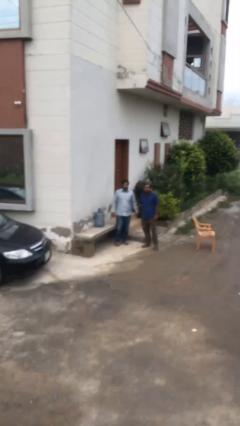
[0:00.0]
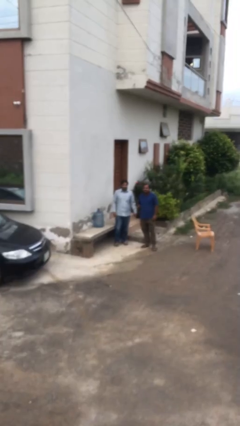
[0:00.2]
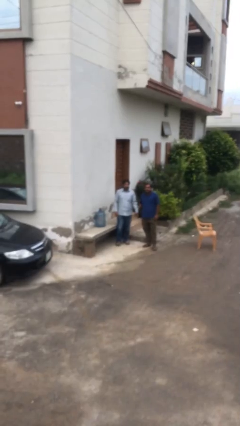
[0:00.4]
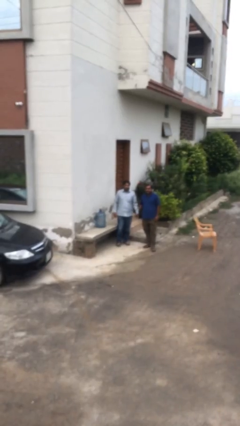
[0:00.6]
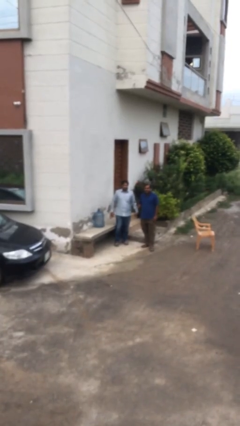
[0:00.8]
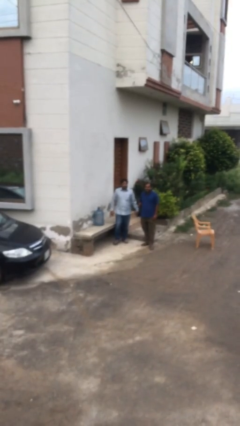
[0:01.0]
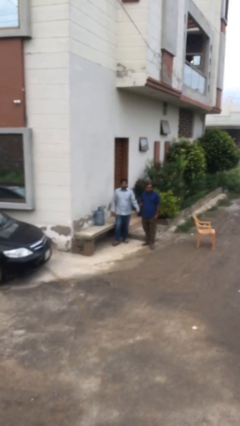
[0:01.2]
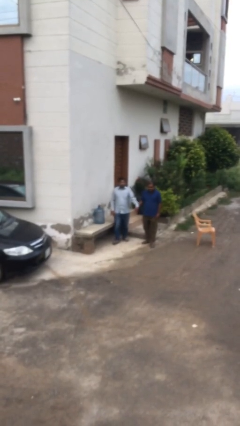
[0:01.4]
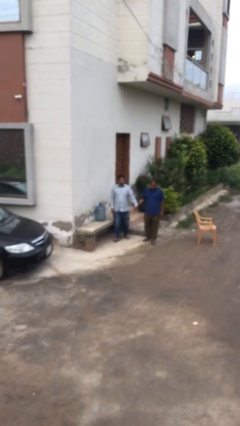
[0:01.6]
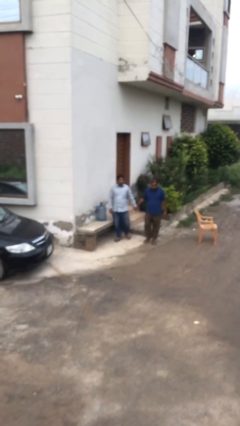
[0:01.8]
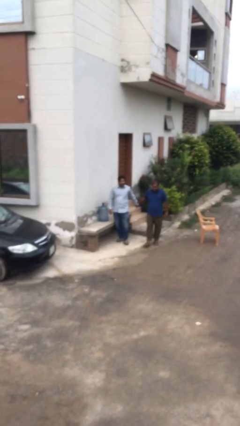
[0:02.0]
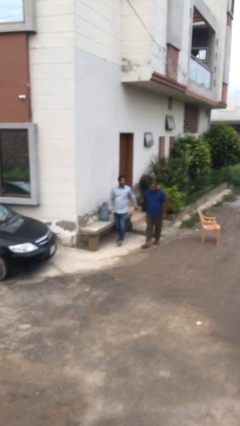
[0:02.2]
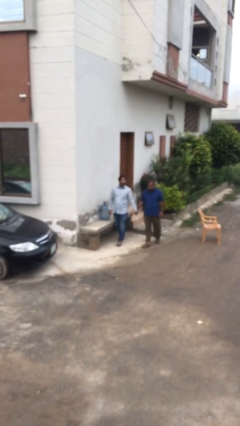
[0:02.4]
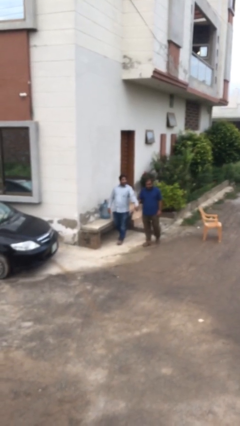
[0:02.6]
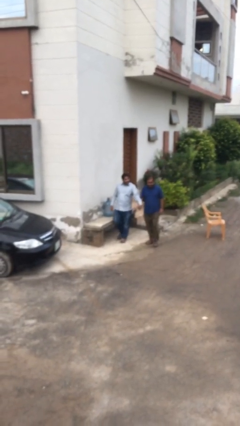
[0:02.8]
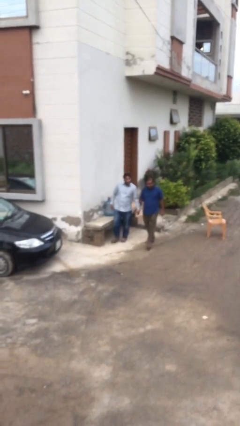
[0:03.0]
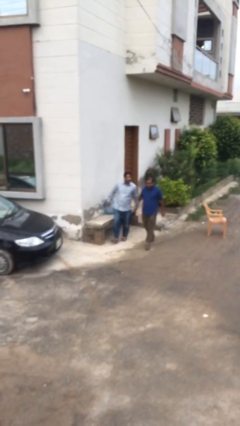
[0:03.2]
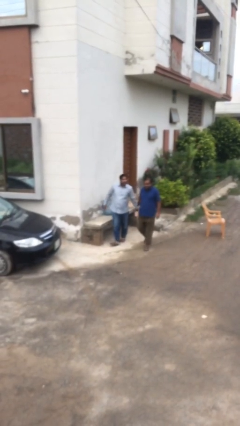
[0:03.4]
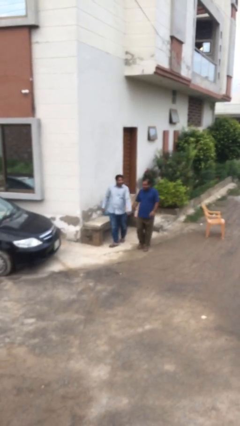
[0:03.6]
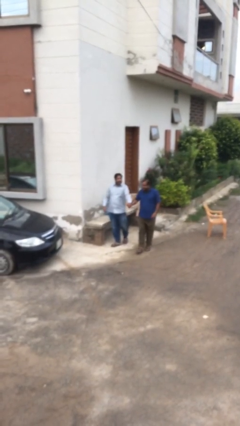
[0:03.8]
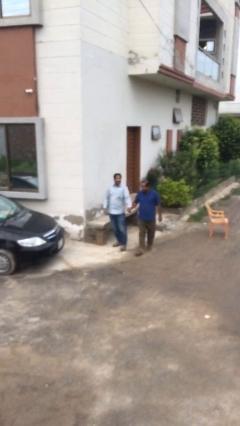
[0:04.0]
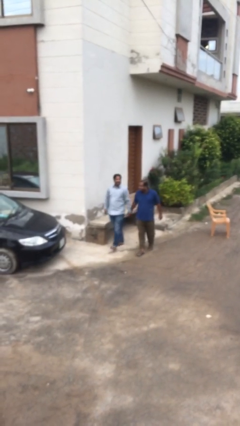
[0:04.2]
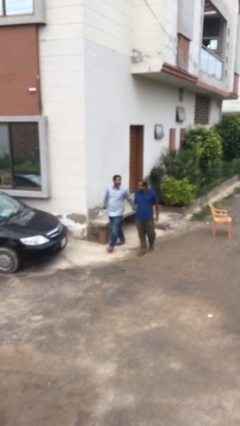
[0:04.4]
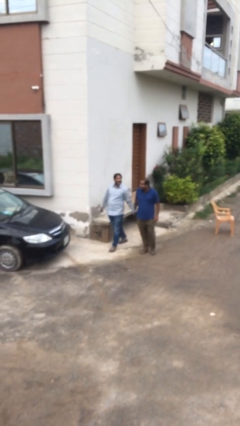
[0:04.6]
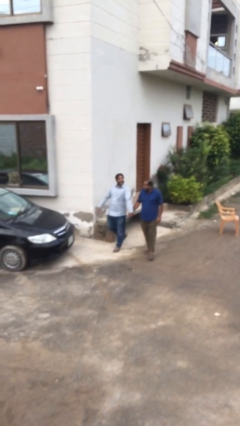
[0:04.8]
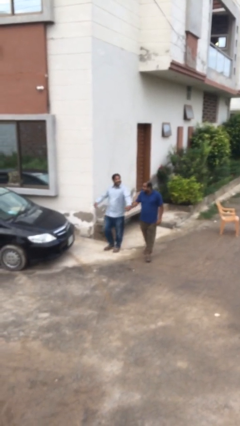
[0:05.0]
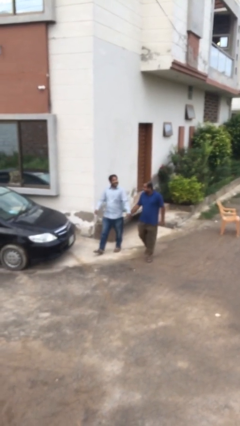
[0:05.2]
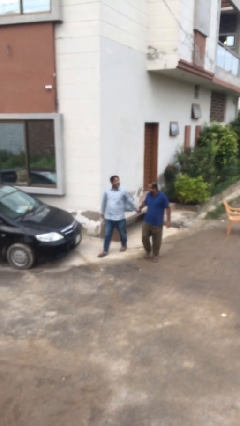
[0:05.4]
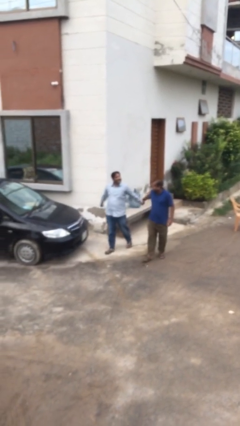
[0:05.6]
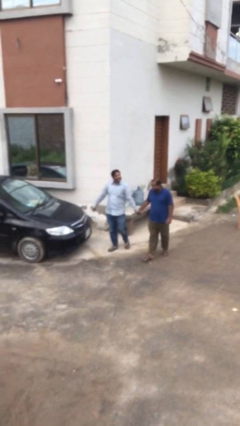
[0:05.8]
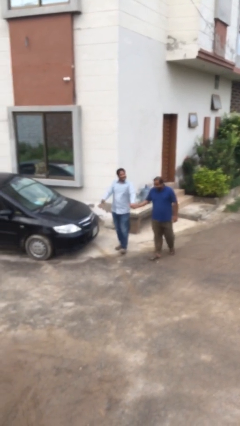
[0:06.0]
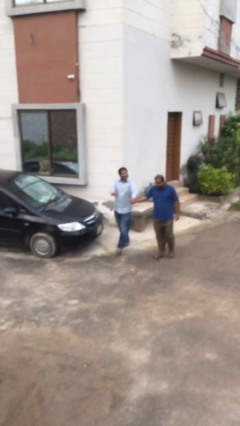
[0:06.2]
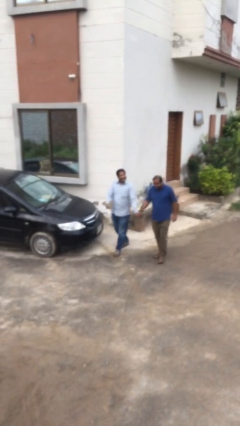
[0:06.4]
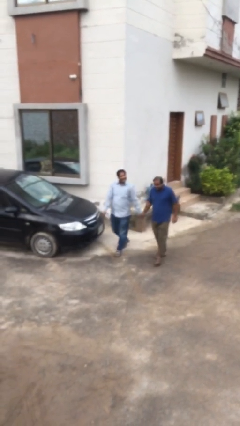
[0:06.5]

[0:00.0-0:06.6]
person holds hand

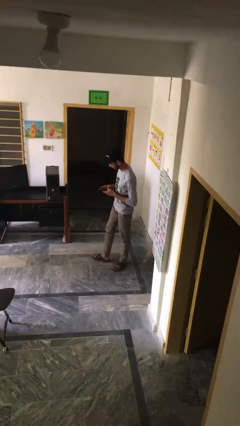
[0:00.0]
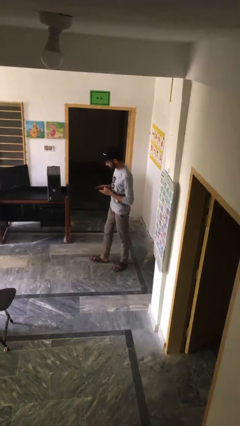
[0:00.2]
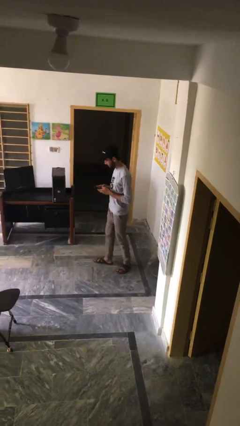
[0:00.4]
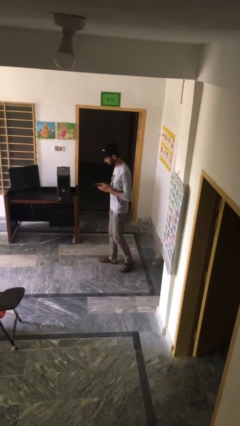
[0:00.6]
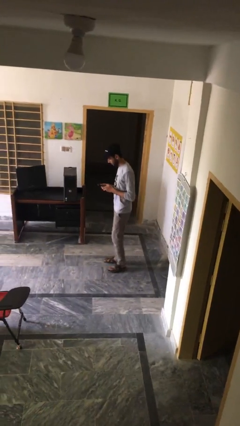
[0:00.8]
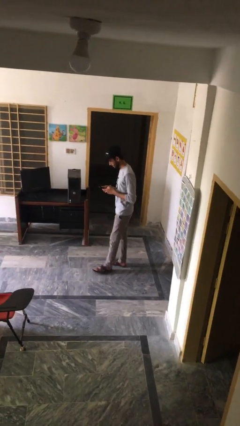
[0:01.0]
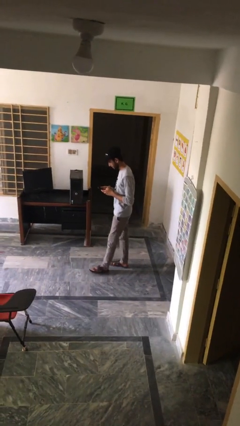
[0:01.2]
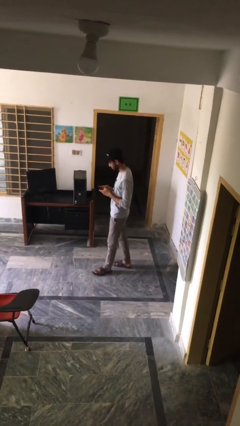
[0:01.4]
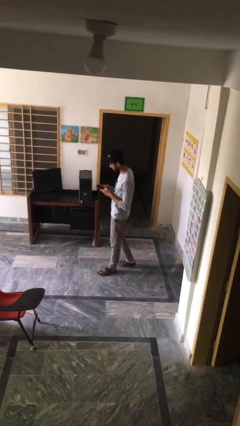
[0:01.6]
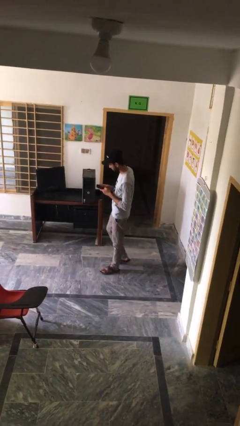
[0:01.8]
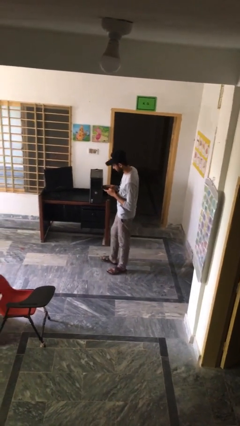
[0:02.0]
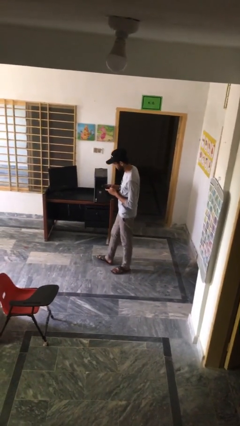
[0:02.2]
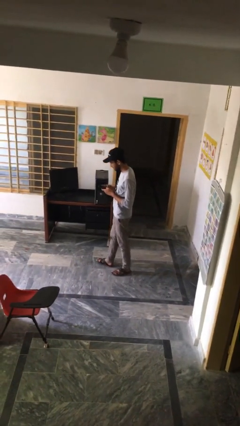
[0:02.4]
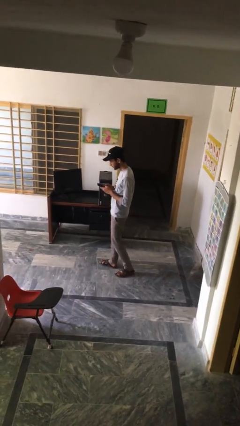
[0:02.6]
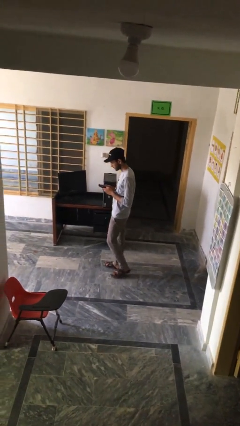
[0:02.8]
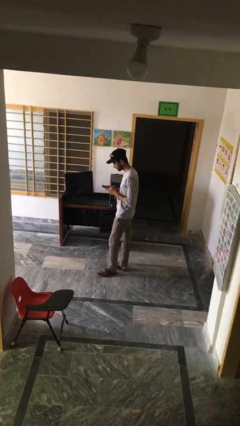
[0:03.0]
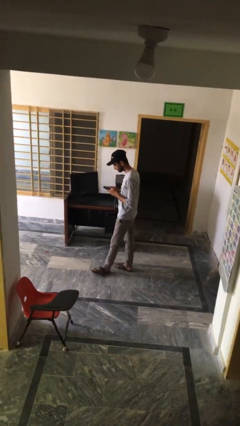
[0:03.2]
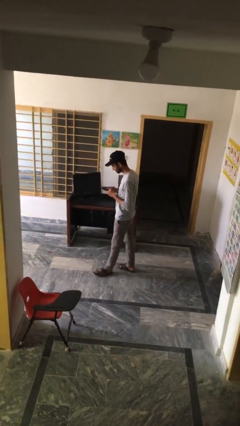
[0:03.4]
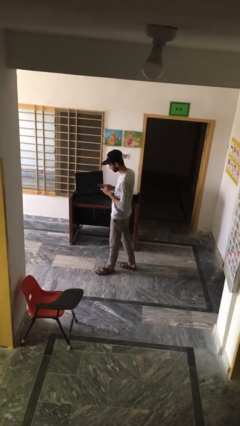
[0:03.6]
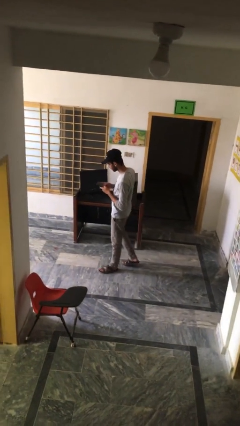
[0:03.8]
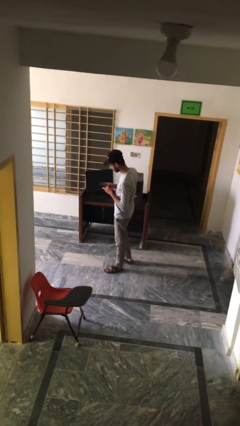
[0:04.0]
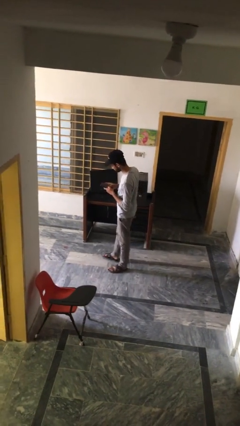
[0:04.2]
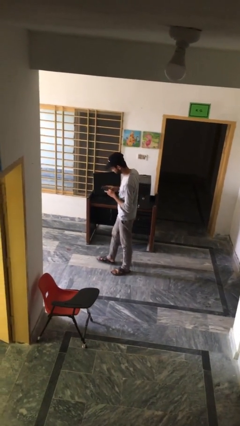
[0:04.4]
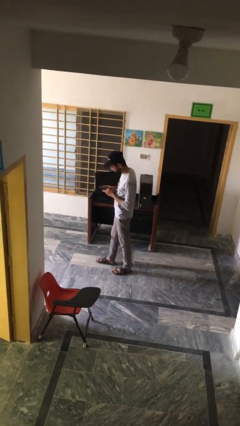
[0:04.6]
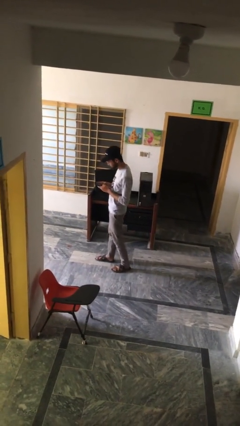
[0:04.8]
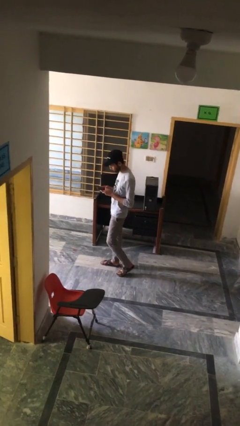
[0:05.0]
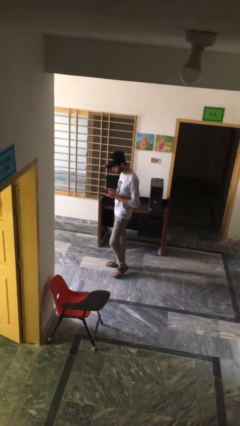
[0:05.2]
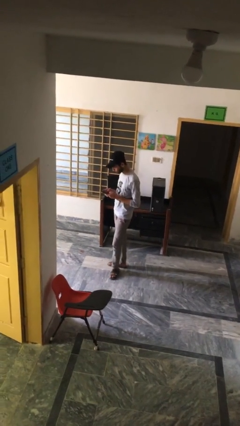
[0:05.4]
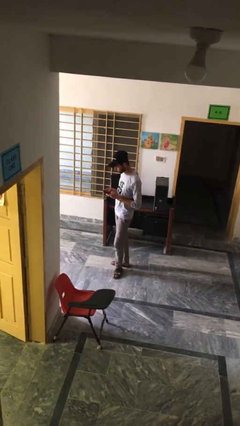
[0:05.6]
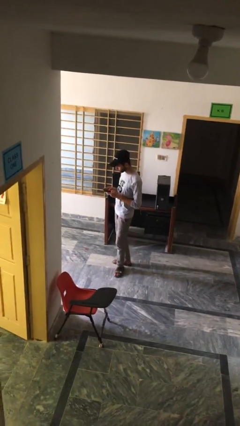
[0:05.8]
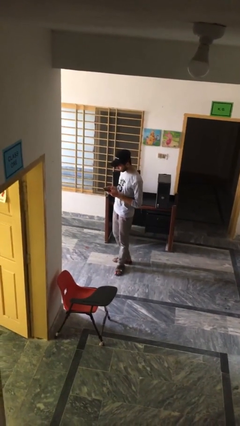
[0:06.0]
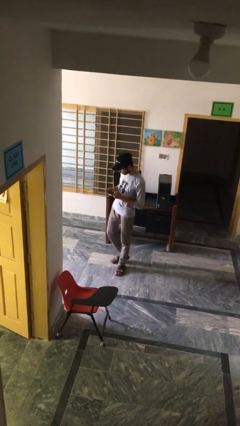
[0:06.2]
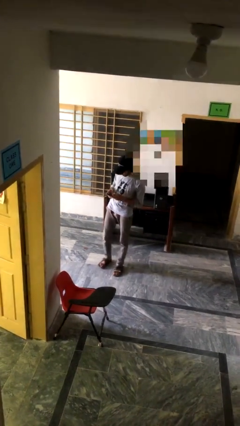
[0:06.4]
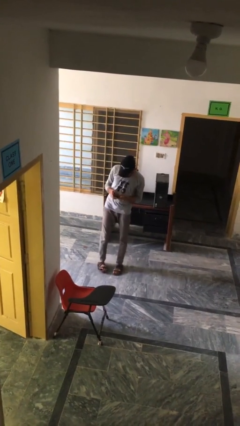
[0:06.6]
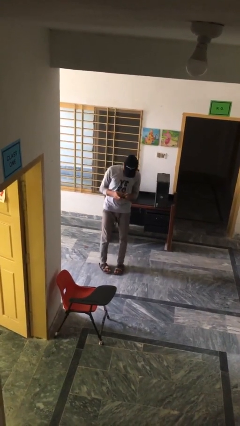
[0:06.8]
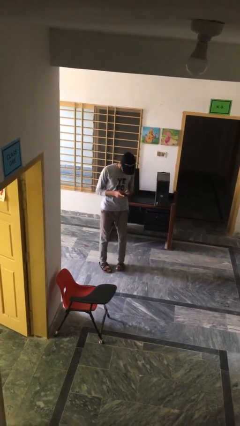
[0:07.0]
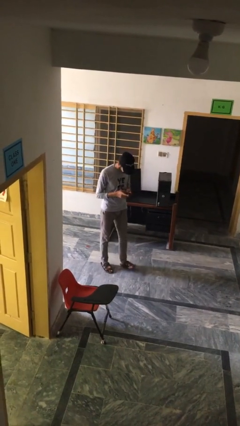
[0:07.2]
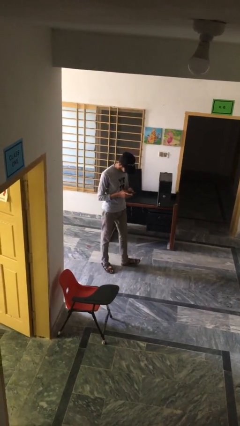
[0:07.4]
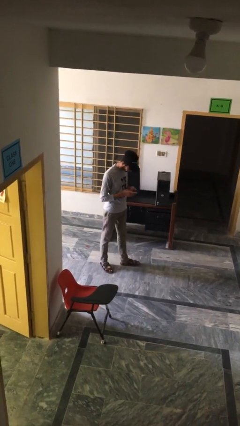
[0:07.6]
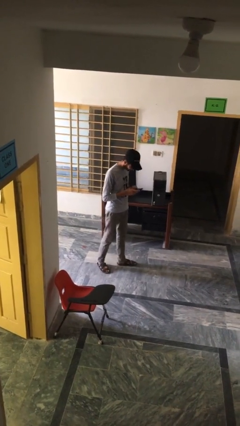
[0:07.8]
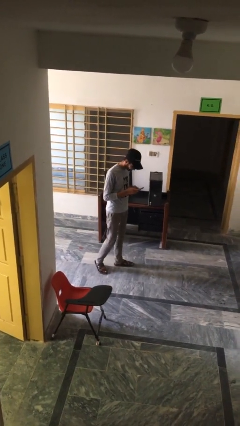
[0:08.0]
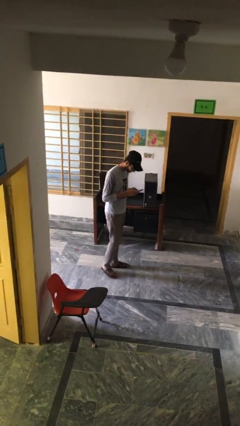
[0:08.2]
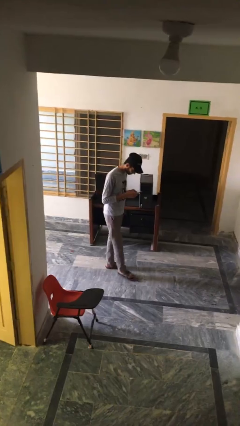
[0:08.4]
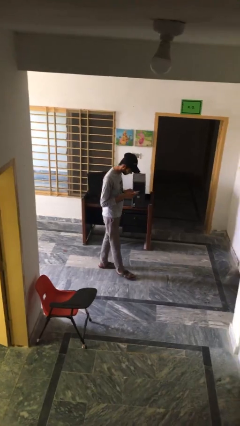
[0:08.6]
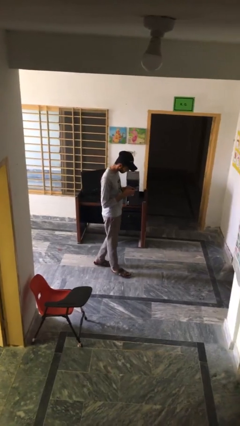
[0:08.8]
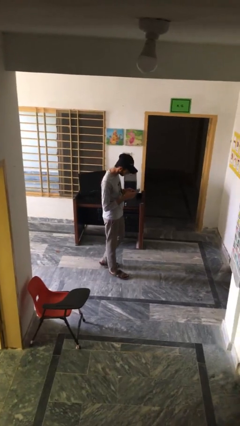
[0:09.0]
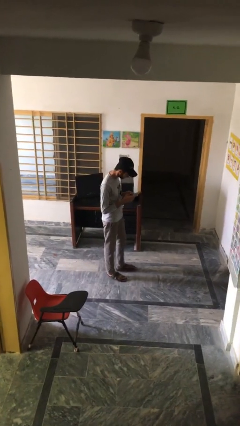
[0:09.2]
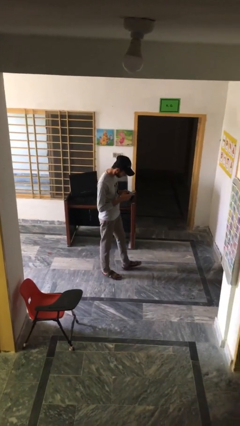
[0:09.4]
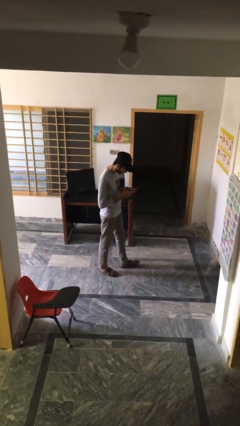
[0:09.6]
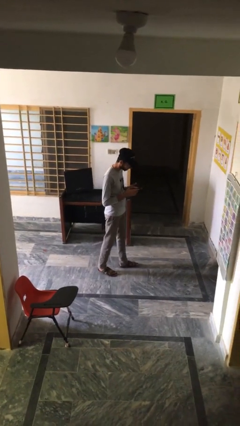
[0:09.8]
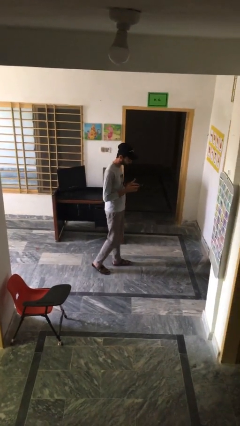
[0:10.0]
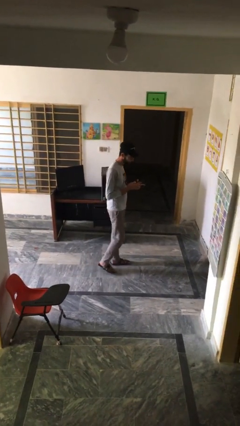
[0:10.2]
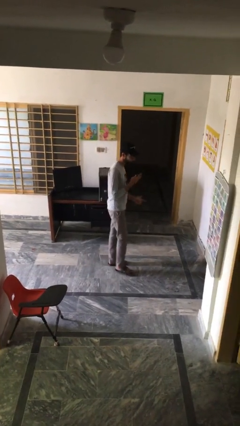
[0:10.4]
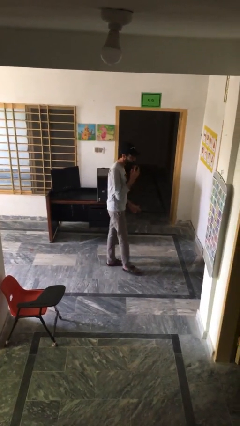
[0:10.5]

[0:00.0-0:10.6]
person texts on phone

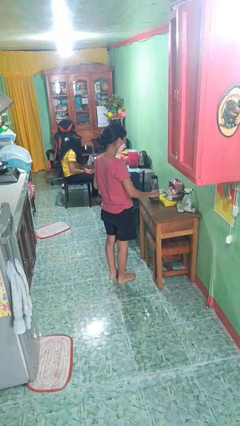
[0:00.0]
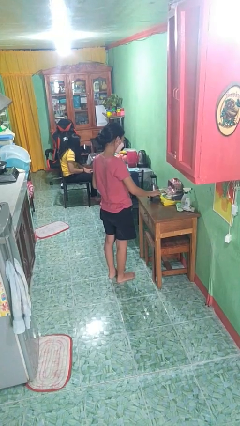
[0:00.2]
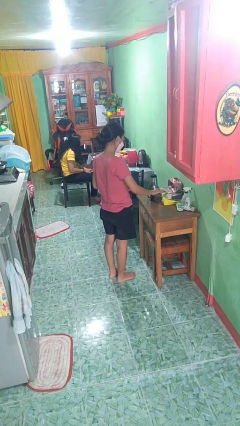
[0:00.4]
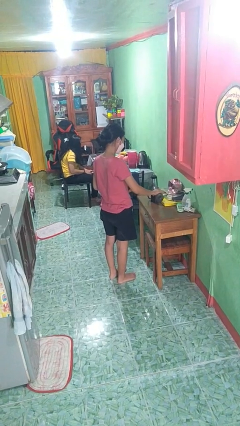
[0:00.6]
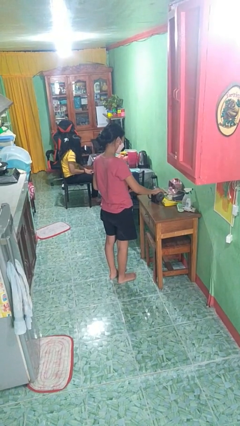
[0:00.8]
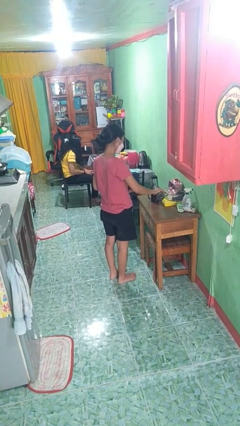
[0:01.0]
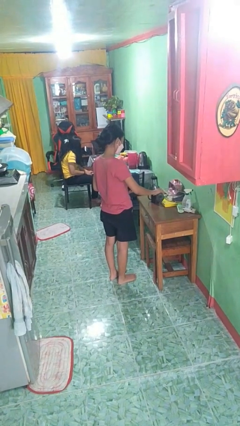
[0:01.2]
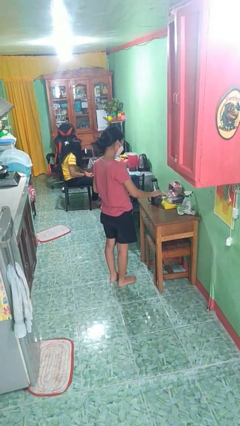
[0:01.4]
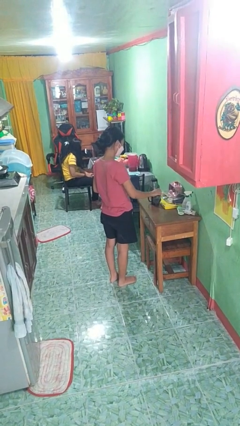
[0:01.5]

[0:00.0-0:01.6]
person pours liquid into cup
